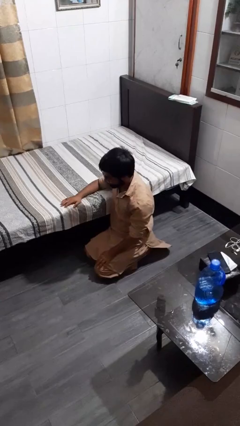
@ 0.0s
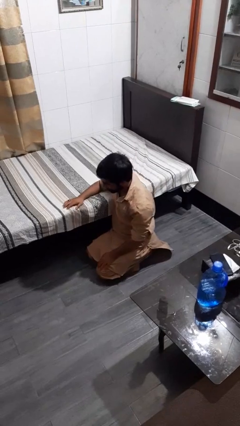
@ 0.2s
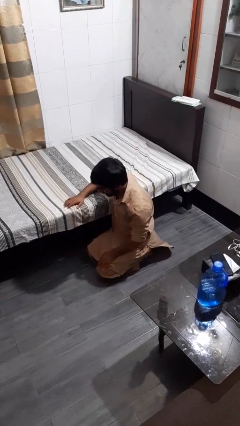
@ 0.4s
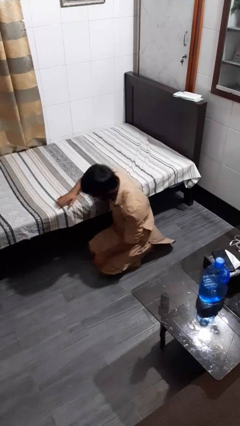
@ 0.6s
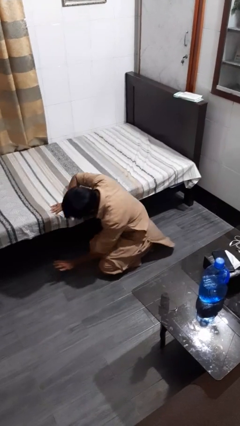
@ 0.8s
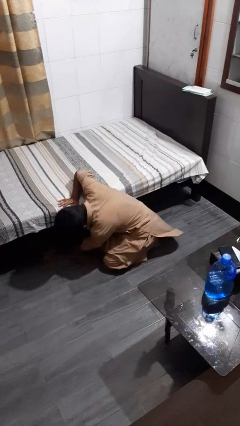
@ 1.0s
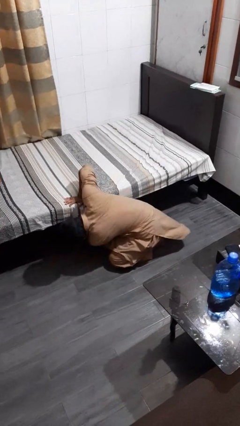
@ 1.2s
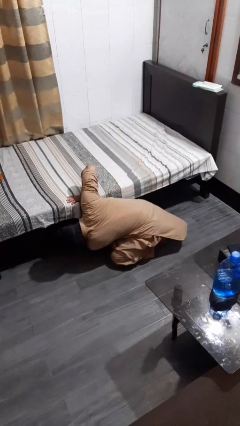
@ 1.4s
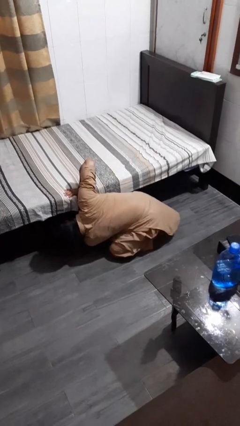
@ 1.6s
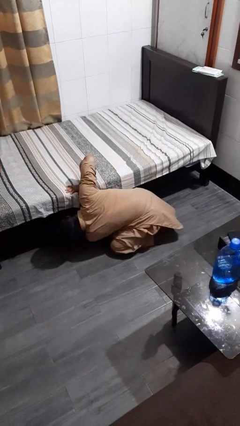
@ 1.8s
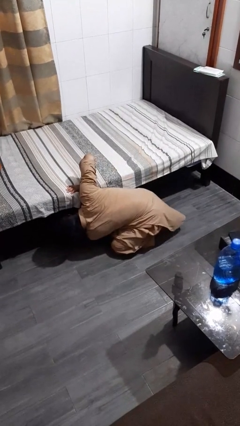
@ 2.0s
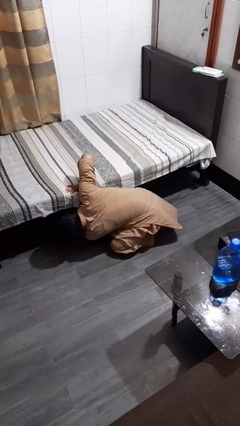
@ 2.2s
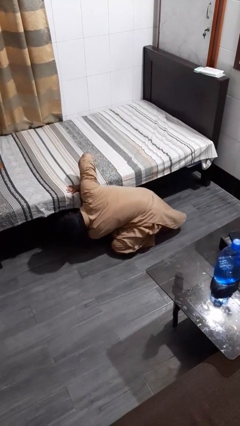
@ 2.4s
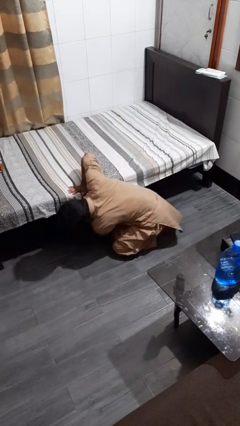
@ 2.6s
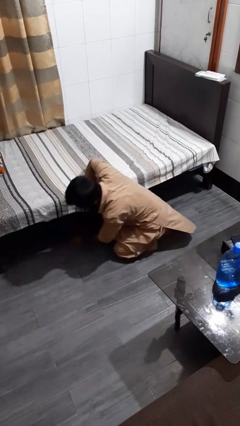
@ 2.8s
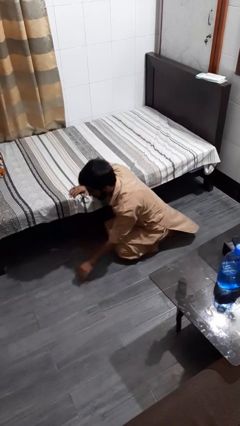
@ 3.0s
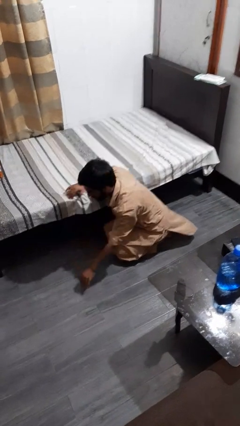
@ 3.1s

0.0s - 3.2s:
person searches under bed

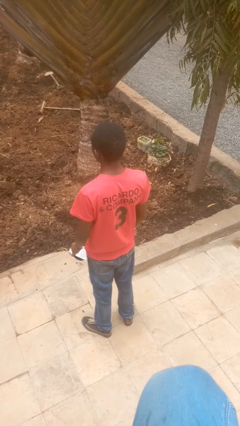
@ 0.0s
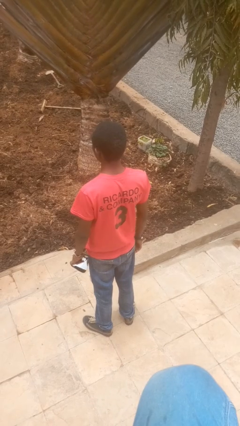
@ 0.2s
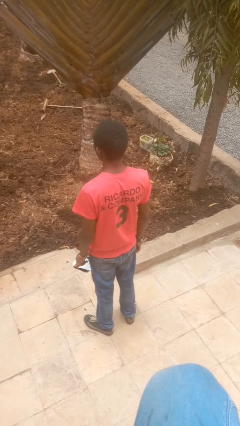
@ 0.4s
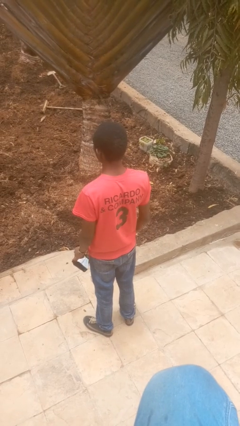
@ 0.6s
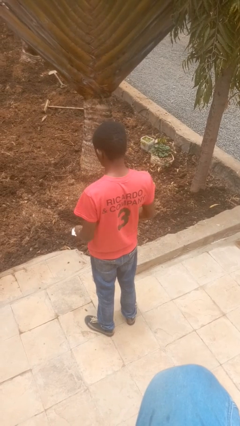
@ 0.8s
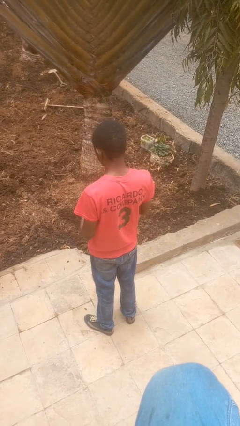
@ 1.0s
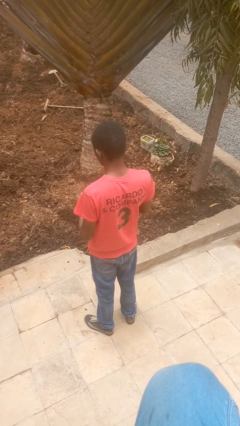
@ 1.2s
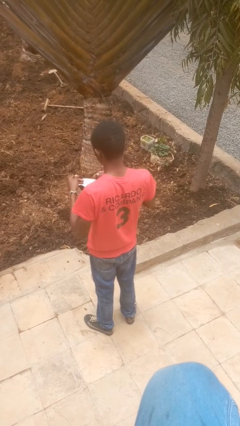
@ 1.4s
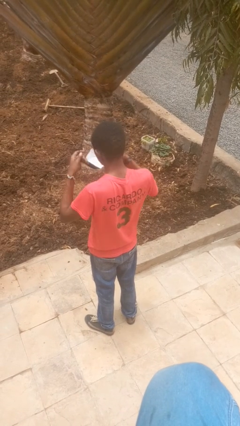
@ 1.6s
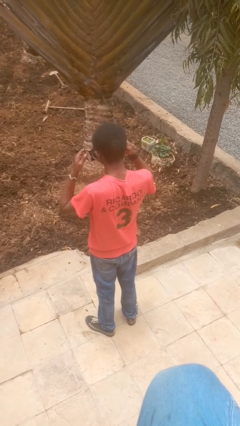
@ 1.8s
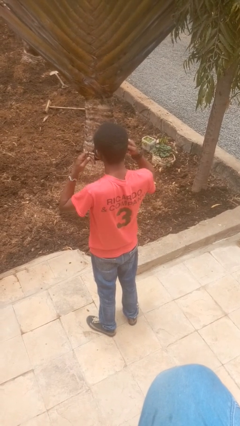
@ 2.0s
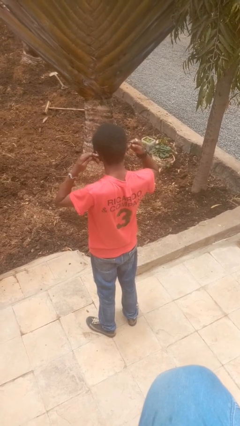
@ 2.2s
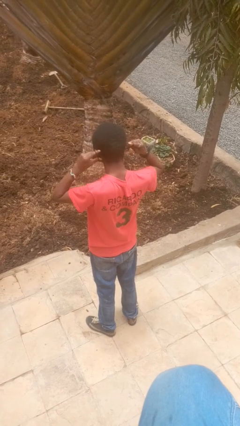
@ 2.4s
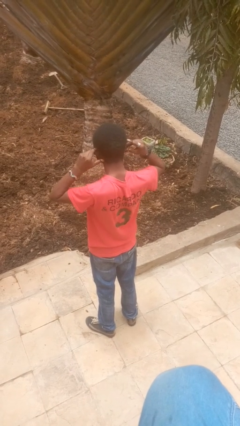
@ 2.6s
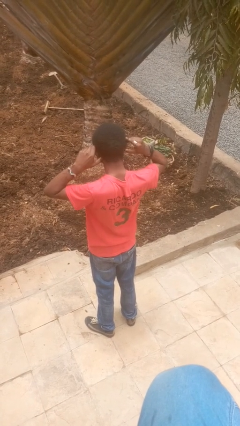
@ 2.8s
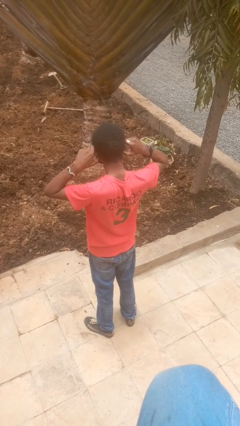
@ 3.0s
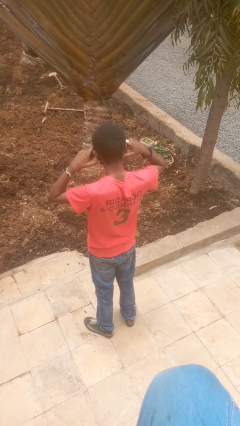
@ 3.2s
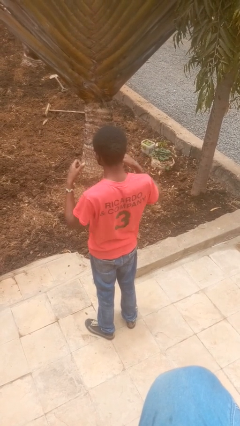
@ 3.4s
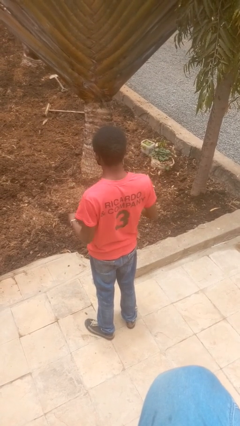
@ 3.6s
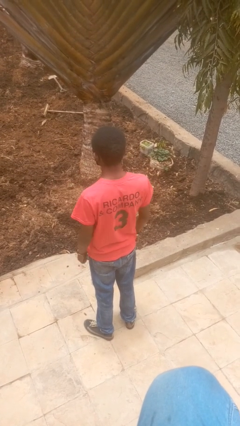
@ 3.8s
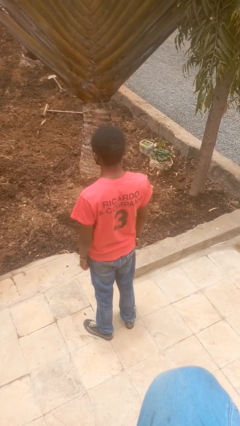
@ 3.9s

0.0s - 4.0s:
person puts on facemask

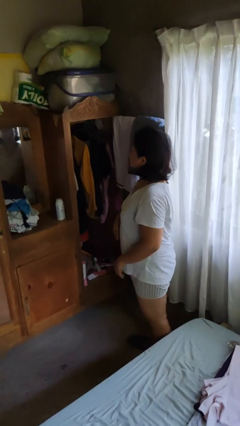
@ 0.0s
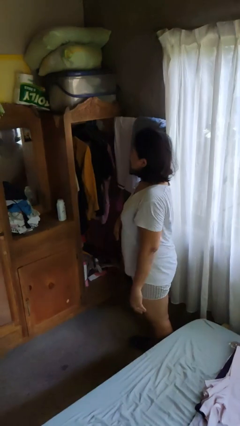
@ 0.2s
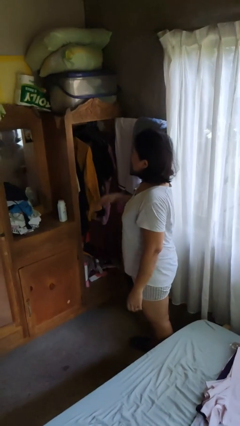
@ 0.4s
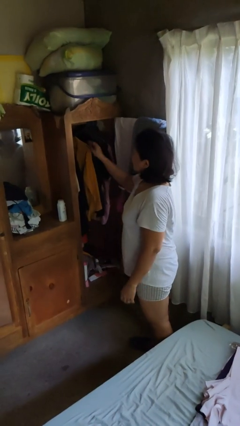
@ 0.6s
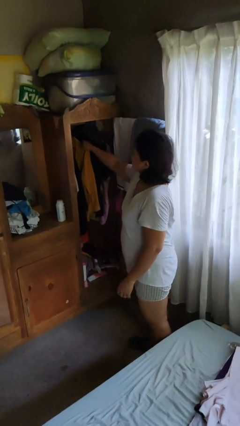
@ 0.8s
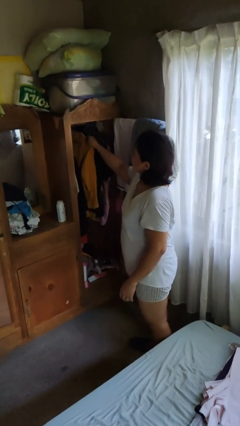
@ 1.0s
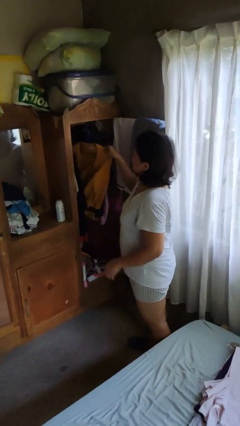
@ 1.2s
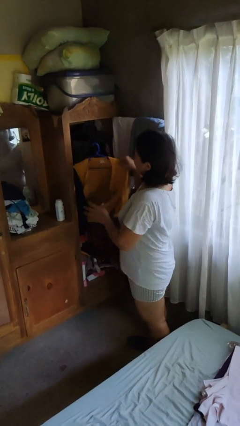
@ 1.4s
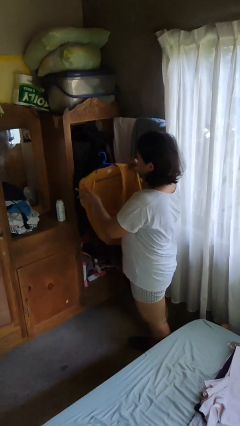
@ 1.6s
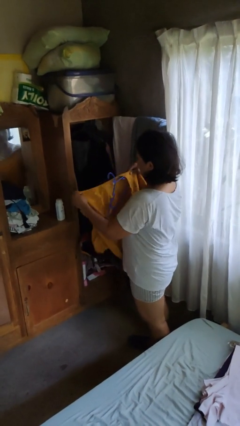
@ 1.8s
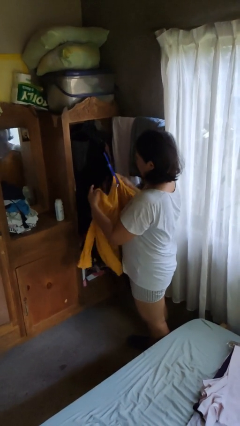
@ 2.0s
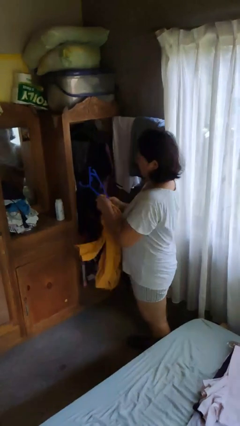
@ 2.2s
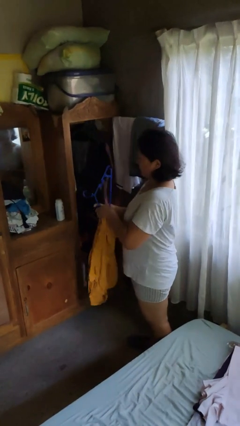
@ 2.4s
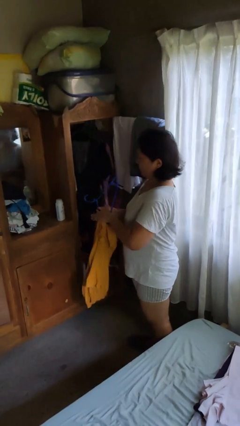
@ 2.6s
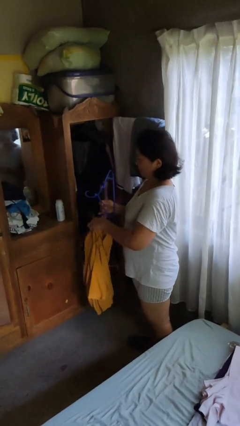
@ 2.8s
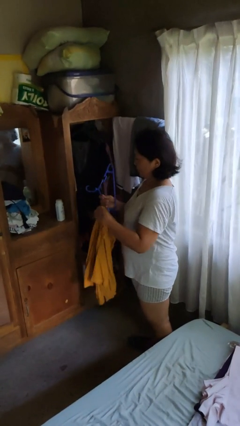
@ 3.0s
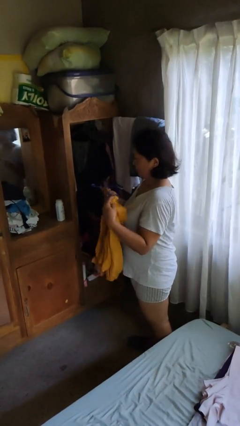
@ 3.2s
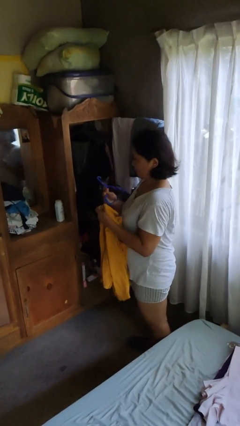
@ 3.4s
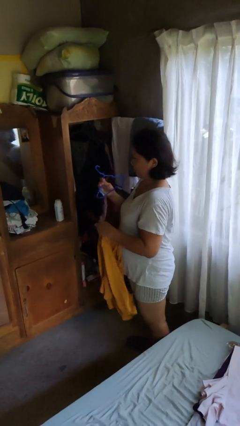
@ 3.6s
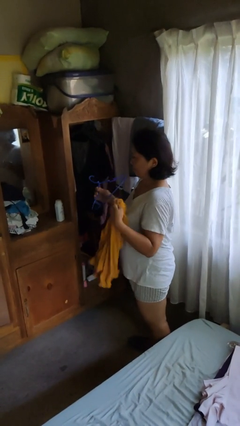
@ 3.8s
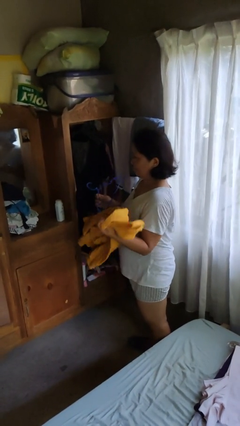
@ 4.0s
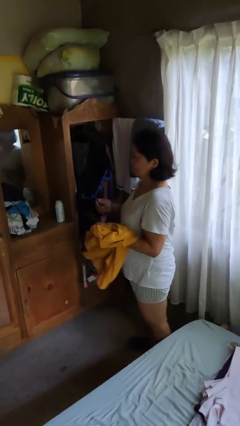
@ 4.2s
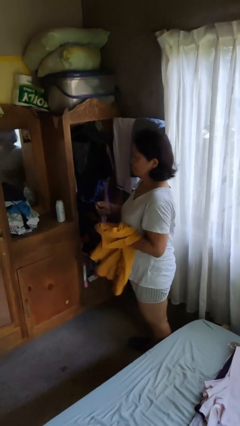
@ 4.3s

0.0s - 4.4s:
person takes clothes from closet

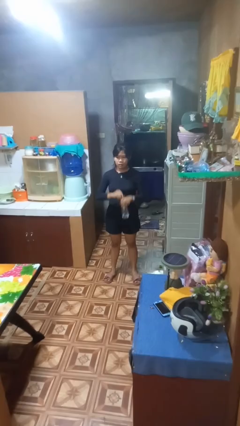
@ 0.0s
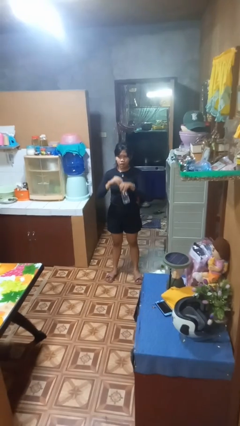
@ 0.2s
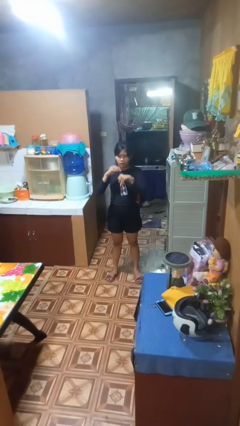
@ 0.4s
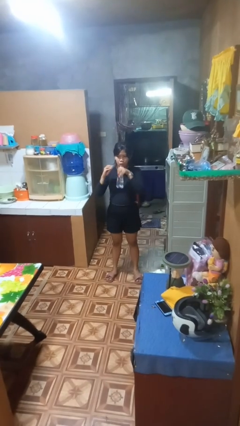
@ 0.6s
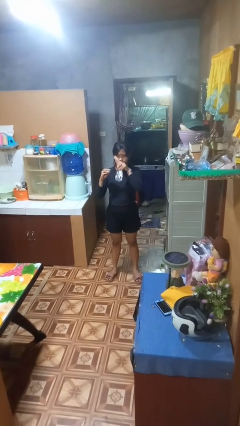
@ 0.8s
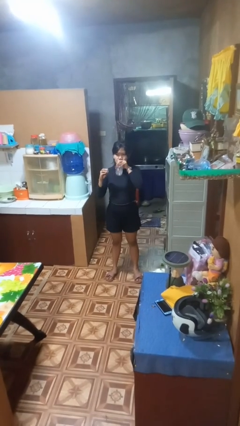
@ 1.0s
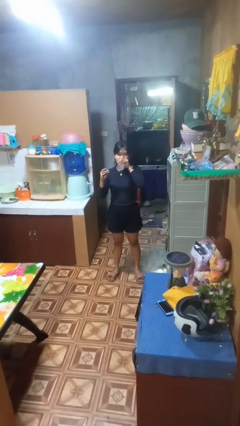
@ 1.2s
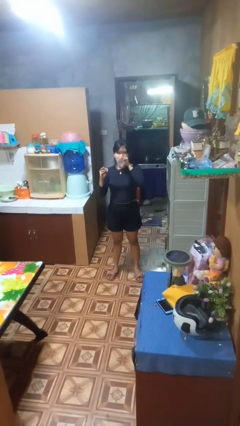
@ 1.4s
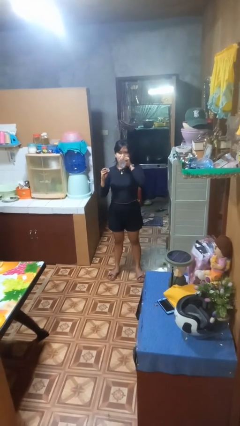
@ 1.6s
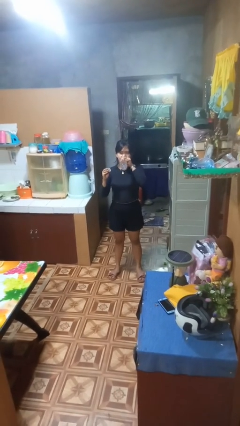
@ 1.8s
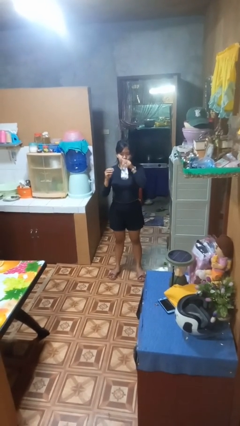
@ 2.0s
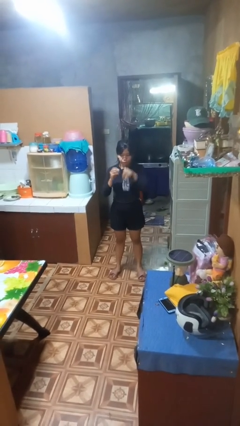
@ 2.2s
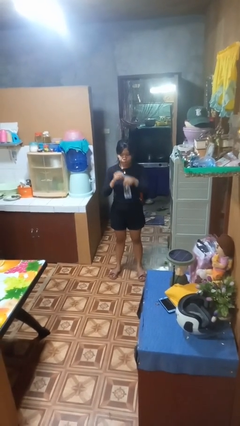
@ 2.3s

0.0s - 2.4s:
person drinks from bottle

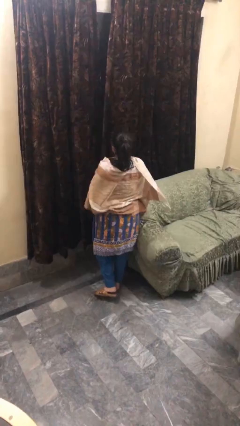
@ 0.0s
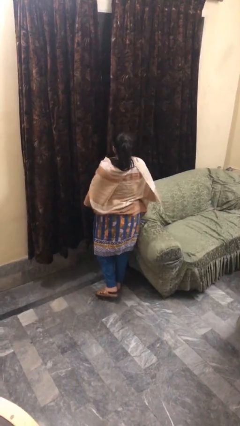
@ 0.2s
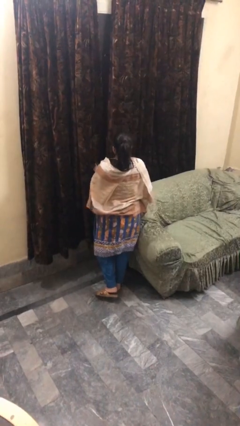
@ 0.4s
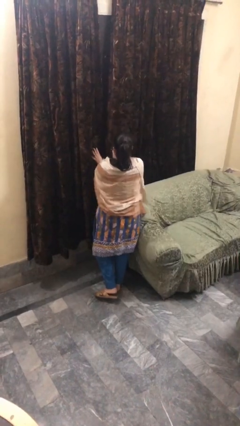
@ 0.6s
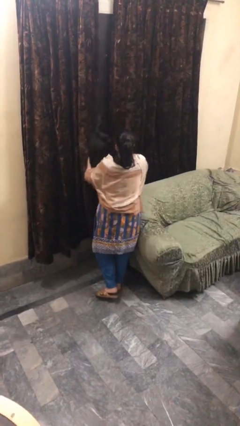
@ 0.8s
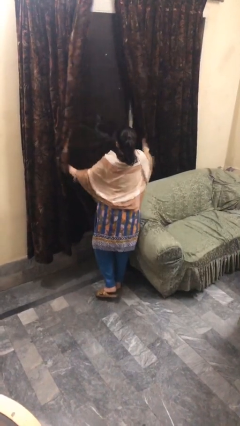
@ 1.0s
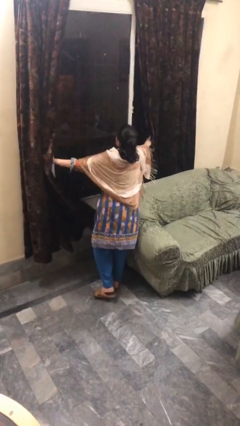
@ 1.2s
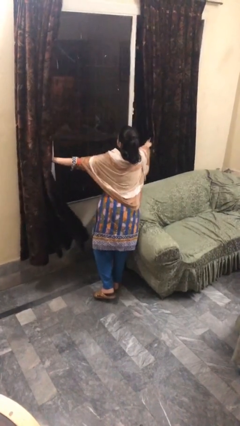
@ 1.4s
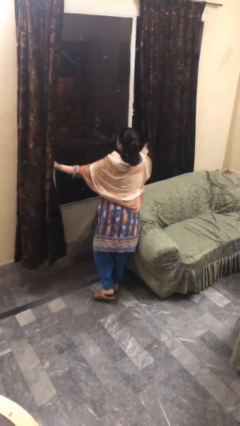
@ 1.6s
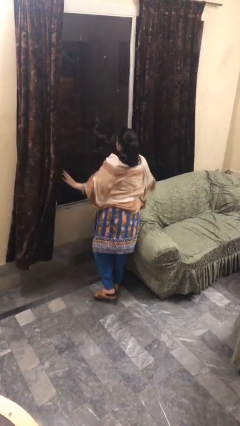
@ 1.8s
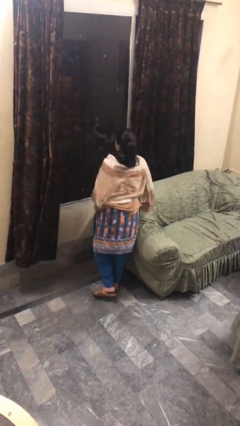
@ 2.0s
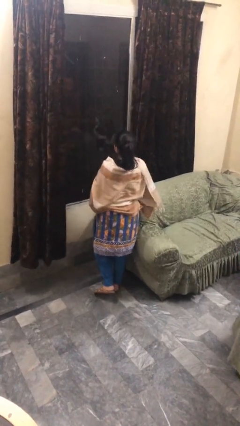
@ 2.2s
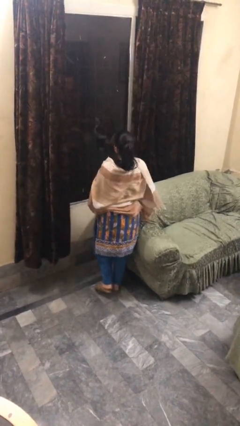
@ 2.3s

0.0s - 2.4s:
person opens curtains

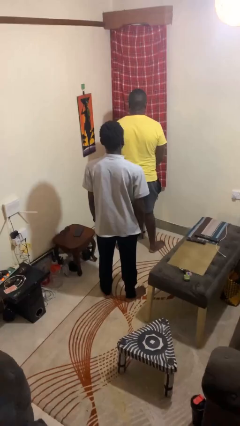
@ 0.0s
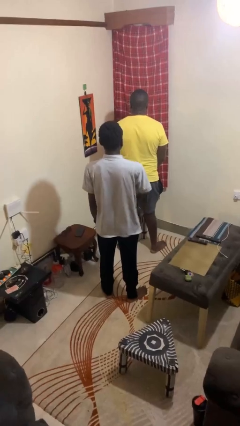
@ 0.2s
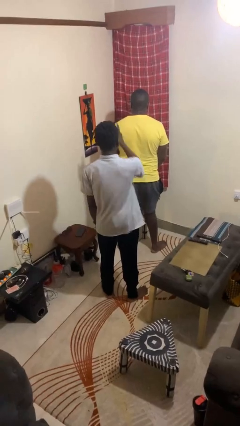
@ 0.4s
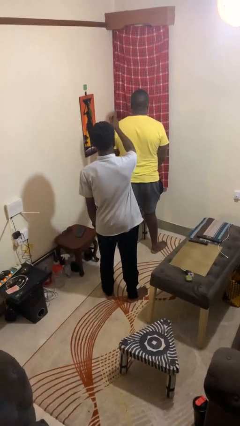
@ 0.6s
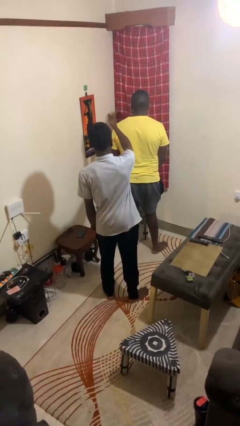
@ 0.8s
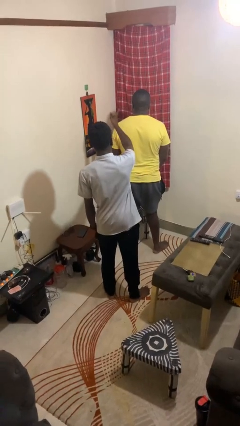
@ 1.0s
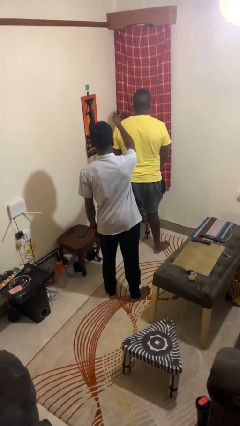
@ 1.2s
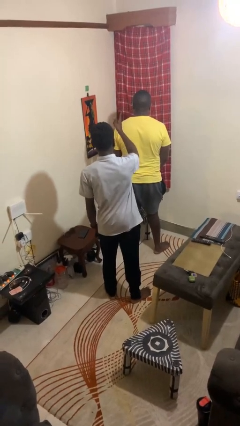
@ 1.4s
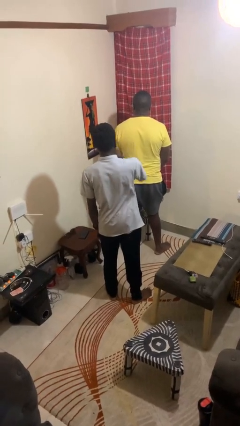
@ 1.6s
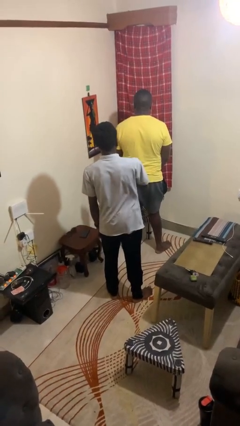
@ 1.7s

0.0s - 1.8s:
person points at person
